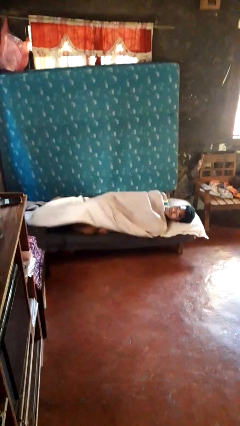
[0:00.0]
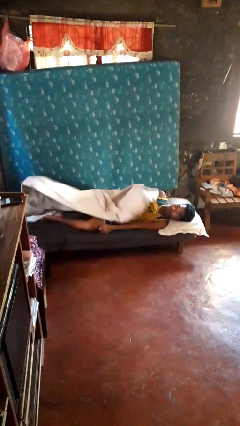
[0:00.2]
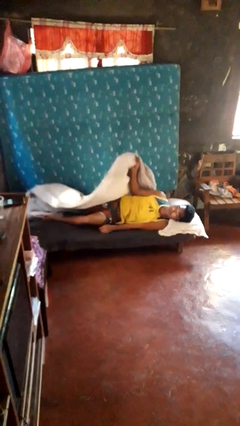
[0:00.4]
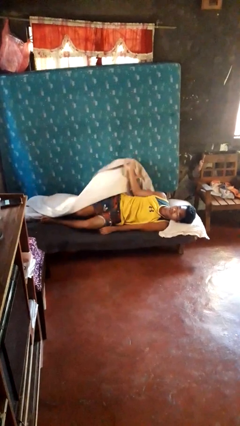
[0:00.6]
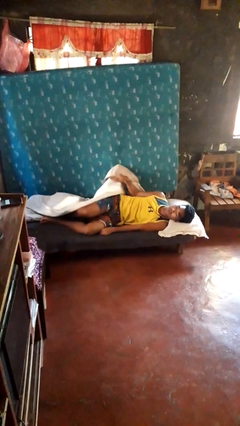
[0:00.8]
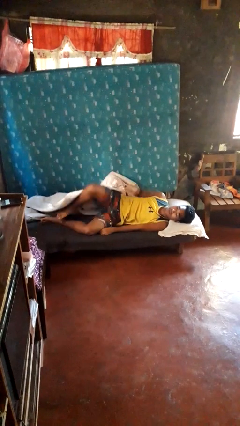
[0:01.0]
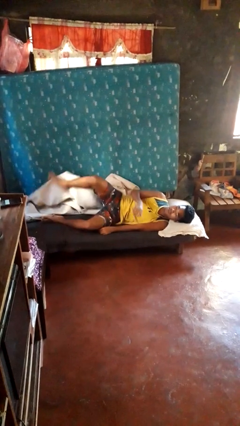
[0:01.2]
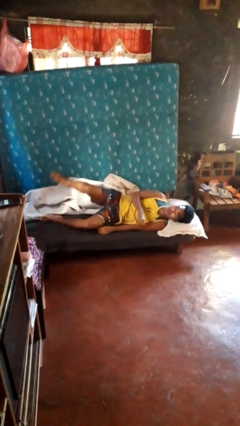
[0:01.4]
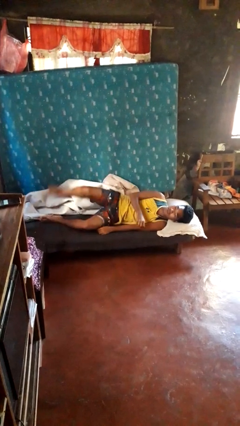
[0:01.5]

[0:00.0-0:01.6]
person uncovers with bedsheets

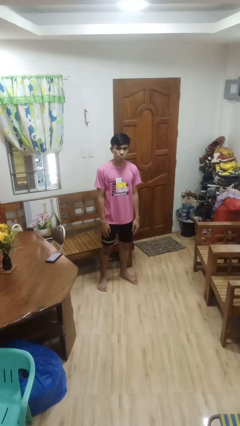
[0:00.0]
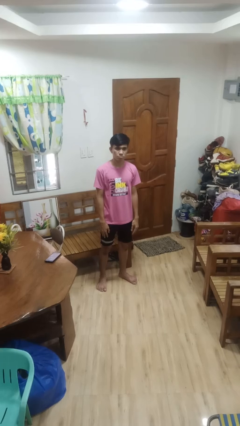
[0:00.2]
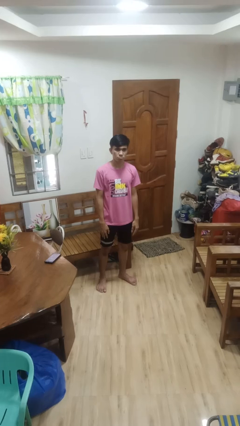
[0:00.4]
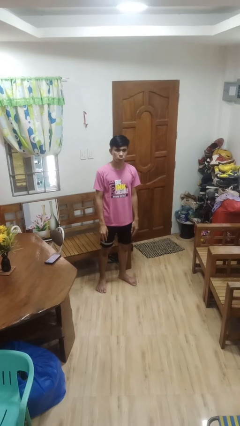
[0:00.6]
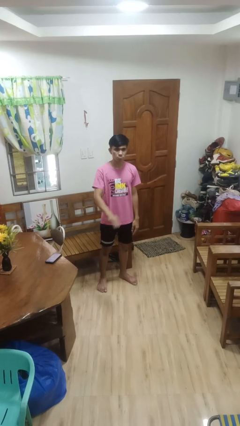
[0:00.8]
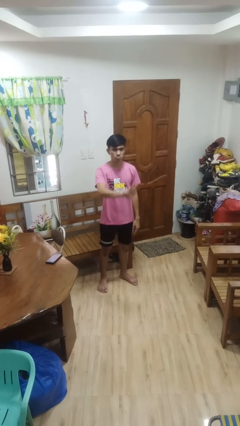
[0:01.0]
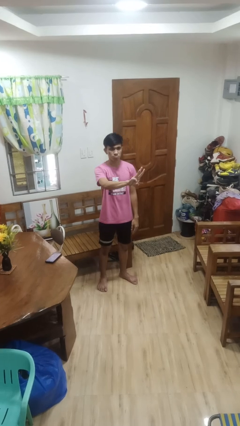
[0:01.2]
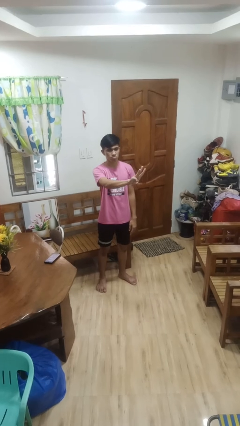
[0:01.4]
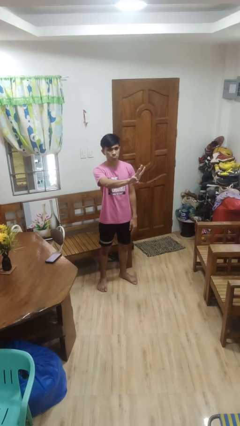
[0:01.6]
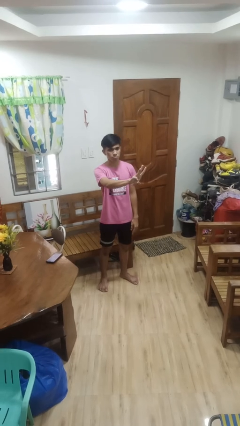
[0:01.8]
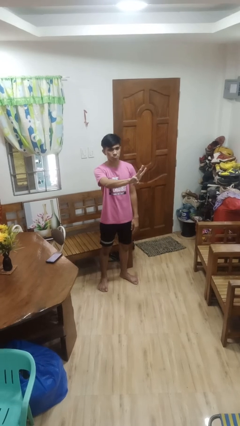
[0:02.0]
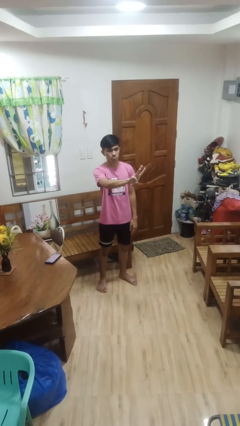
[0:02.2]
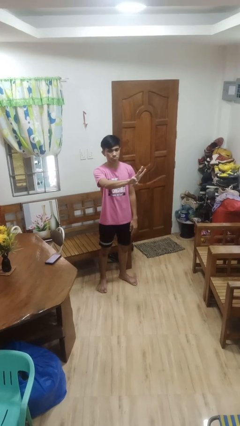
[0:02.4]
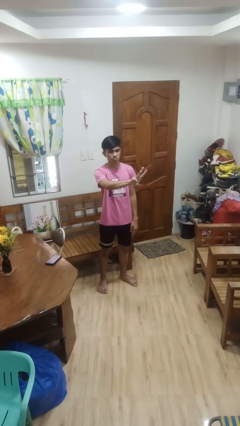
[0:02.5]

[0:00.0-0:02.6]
person gestures number three

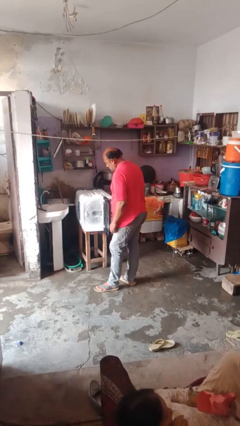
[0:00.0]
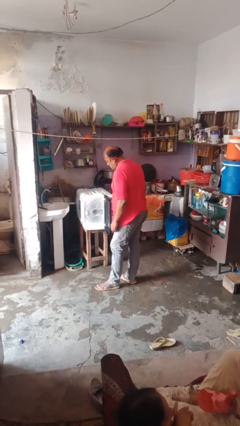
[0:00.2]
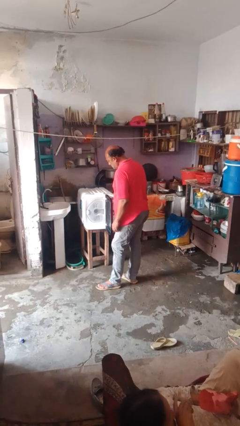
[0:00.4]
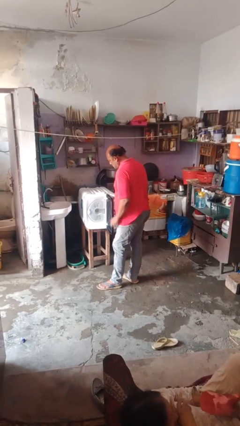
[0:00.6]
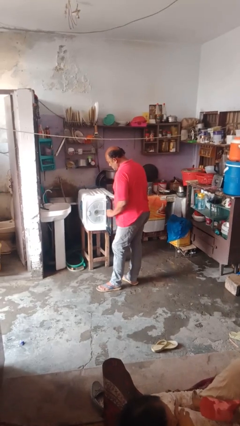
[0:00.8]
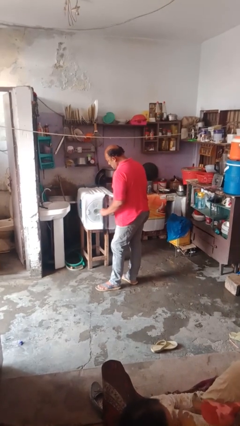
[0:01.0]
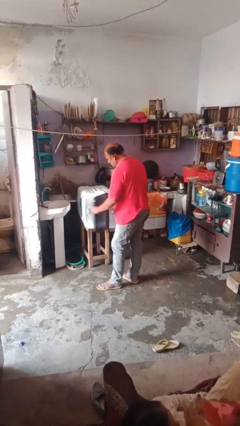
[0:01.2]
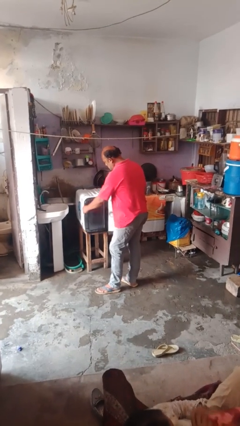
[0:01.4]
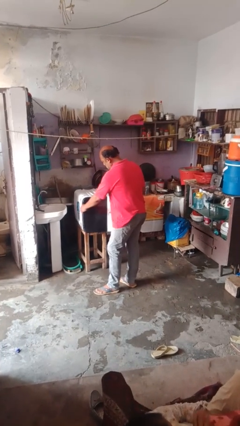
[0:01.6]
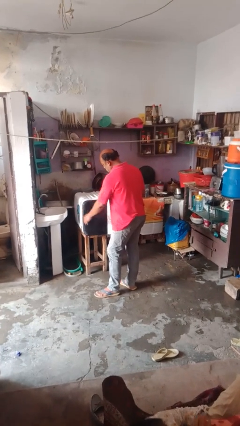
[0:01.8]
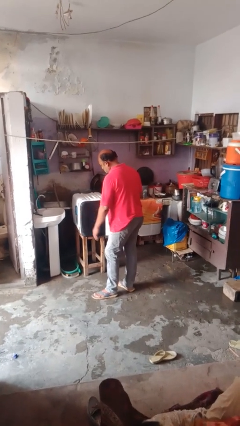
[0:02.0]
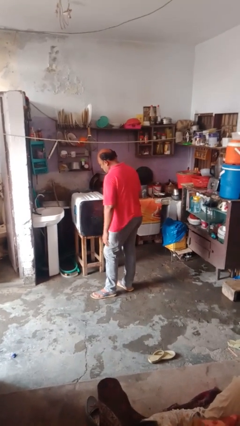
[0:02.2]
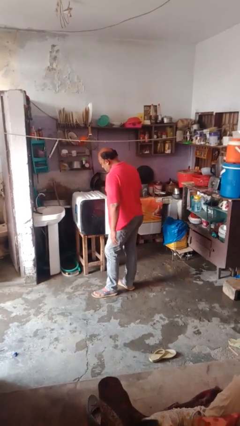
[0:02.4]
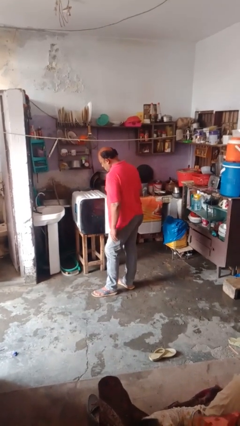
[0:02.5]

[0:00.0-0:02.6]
person closes dishwasher

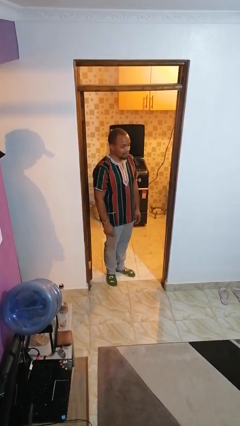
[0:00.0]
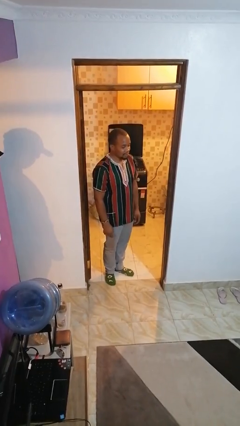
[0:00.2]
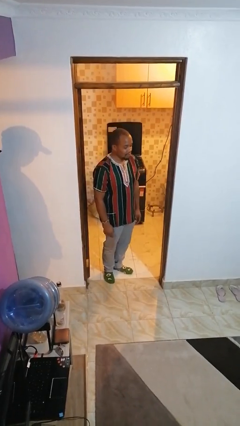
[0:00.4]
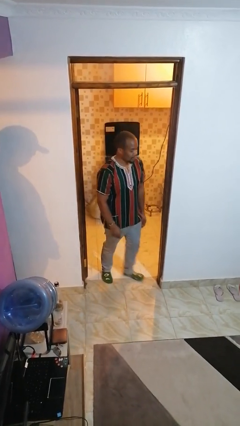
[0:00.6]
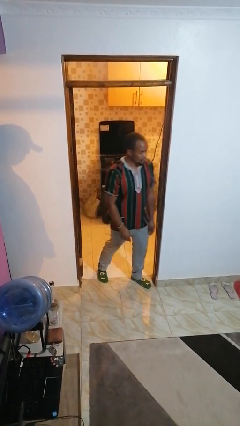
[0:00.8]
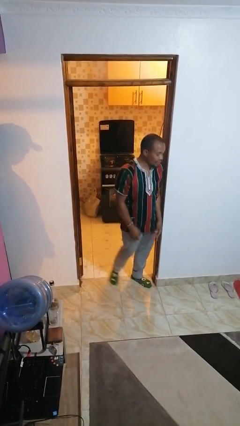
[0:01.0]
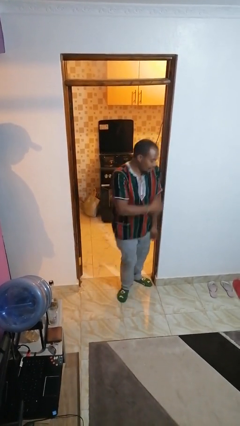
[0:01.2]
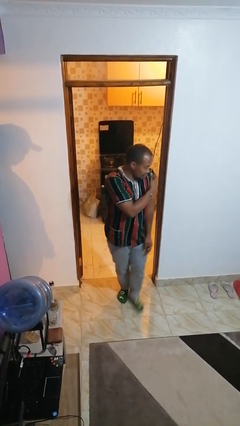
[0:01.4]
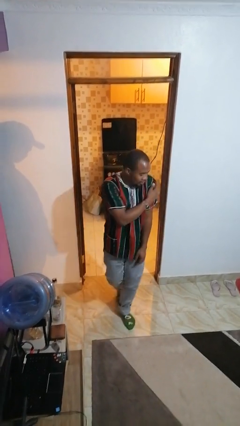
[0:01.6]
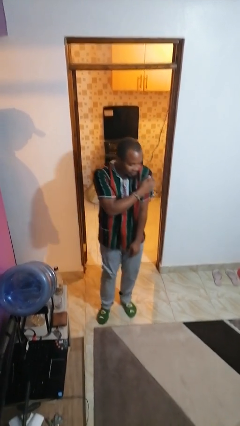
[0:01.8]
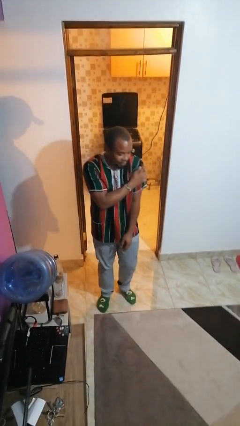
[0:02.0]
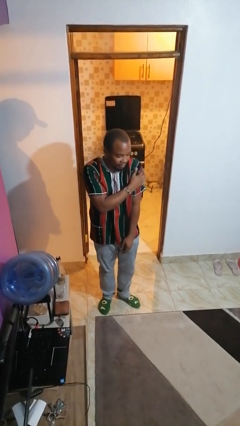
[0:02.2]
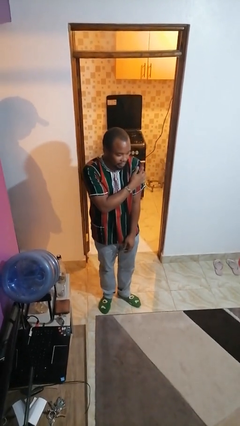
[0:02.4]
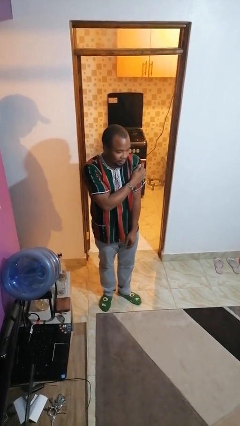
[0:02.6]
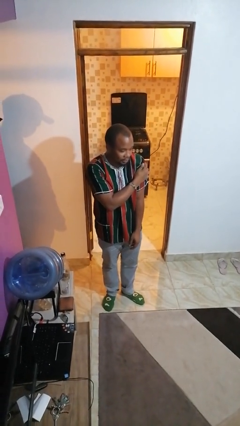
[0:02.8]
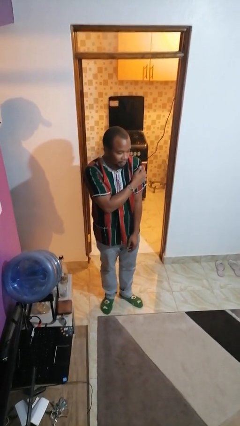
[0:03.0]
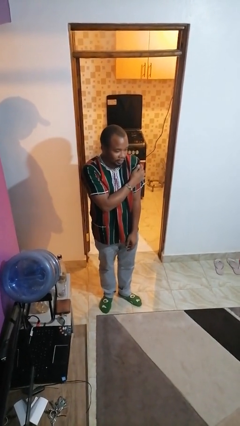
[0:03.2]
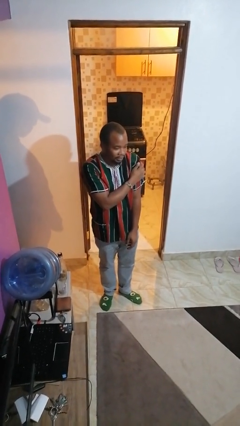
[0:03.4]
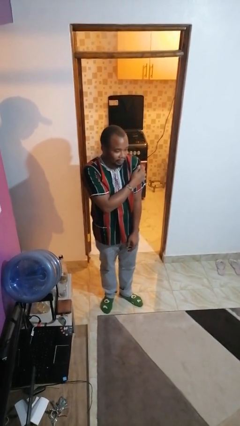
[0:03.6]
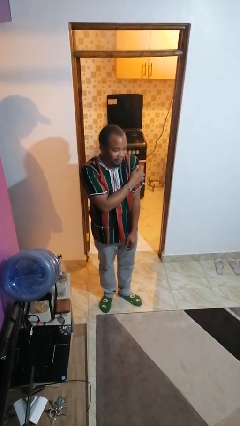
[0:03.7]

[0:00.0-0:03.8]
person bumps into wall

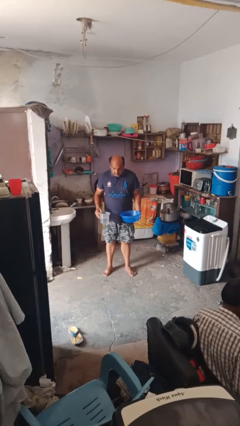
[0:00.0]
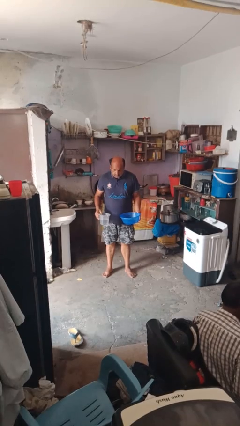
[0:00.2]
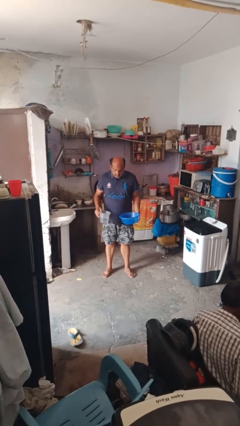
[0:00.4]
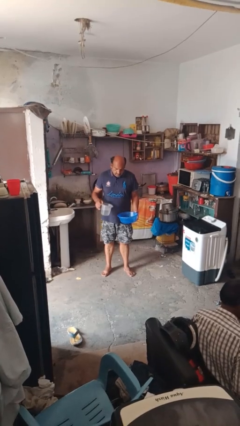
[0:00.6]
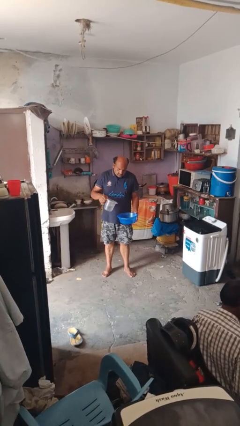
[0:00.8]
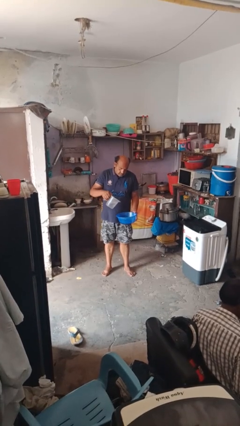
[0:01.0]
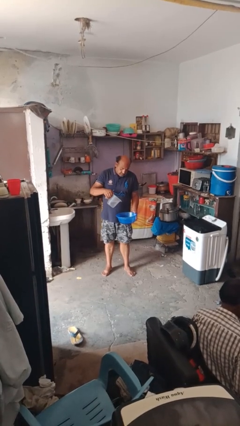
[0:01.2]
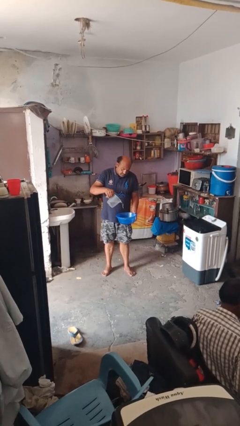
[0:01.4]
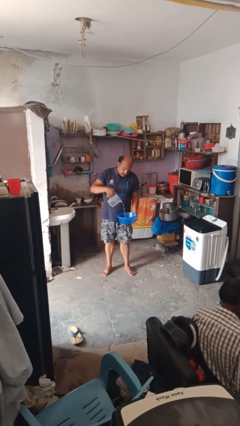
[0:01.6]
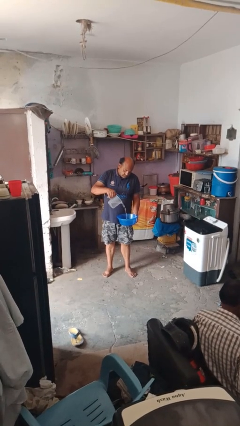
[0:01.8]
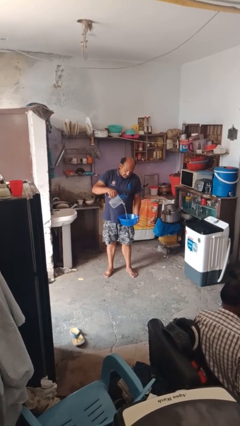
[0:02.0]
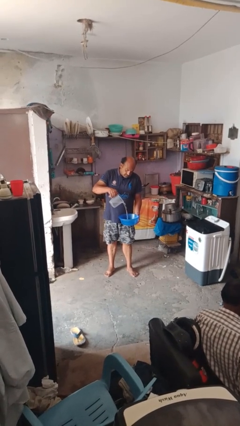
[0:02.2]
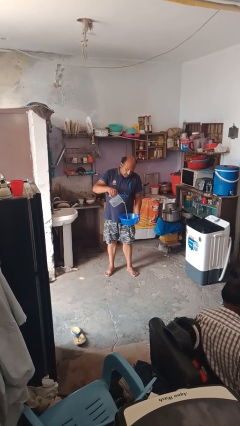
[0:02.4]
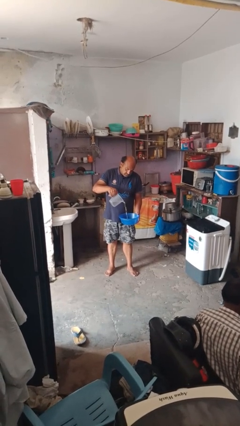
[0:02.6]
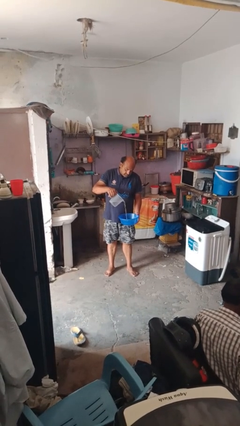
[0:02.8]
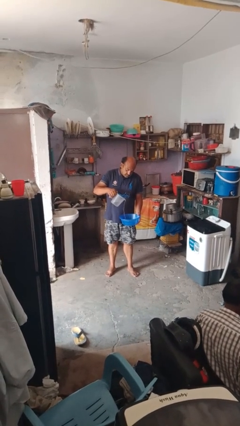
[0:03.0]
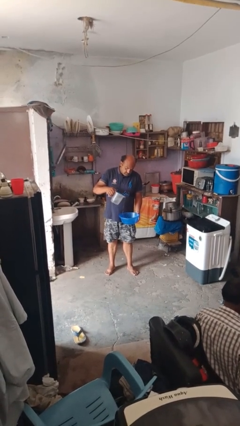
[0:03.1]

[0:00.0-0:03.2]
person pours into bowl

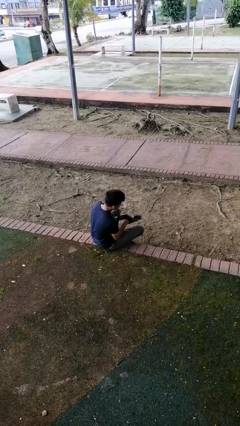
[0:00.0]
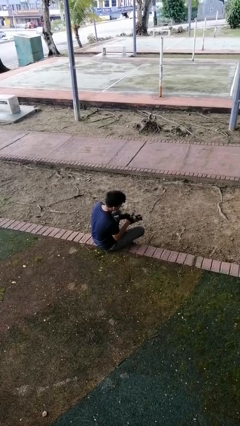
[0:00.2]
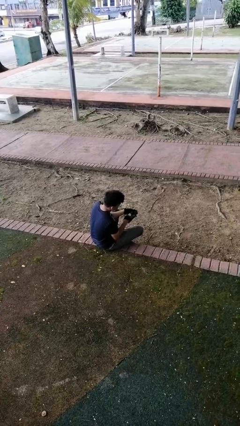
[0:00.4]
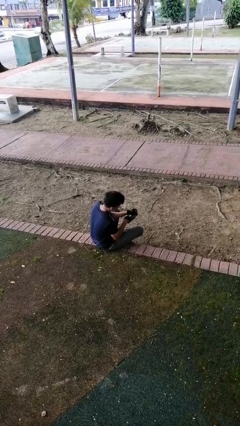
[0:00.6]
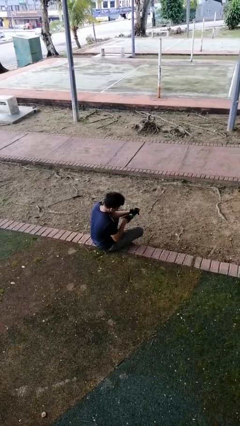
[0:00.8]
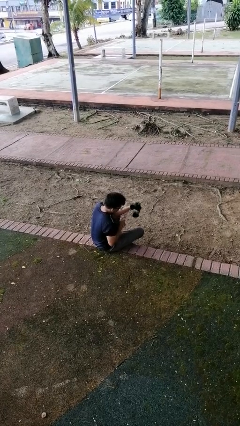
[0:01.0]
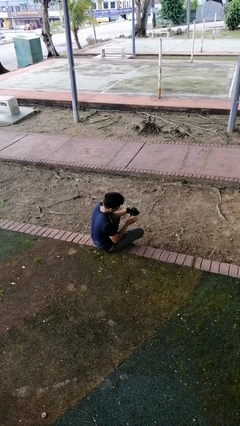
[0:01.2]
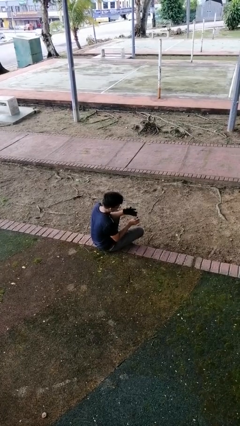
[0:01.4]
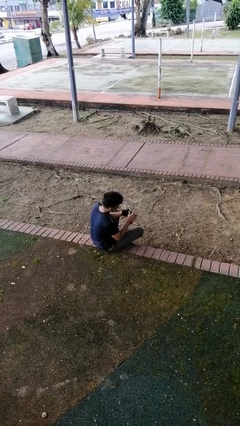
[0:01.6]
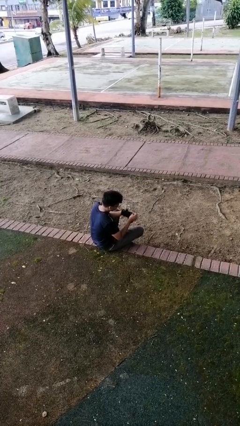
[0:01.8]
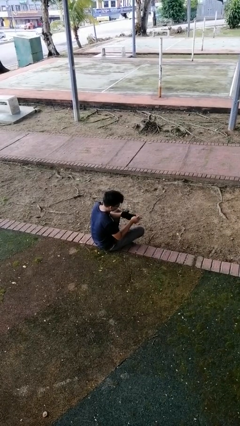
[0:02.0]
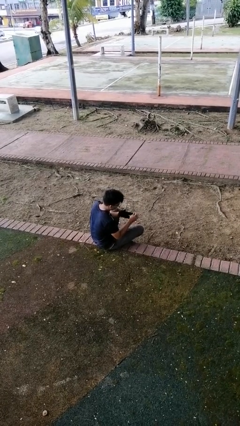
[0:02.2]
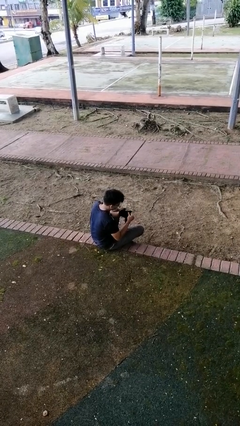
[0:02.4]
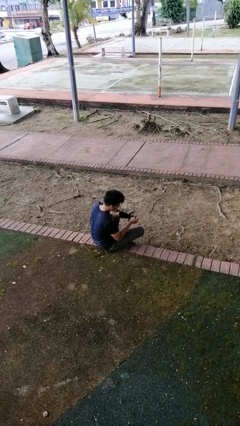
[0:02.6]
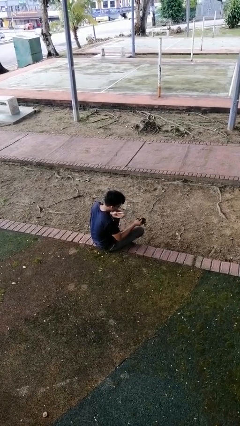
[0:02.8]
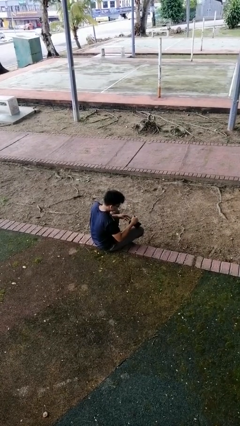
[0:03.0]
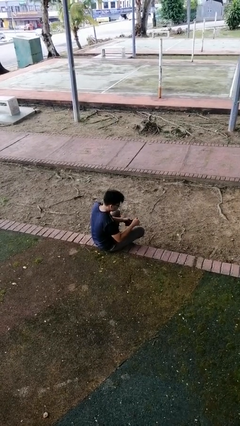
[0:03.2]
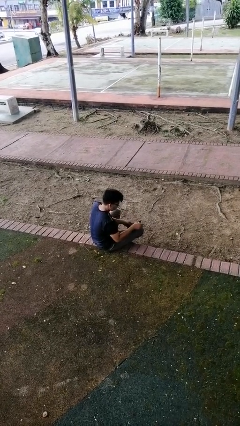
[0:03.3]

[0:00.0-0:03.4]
person takes off gloves
